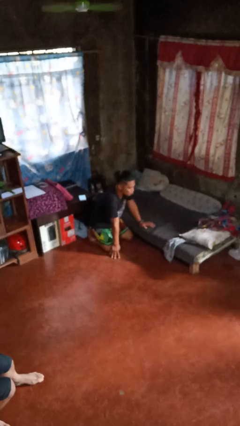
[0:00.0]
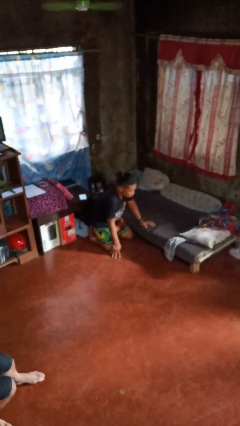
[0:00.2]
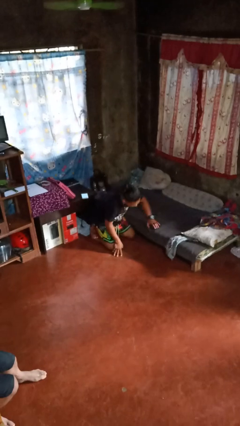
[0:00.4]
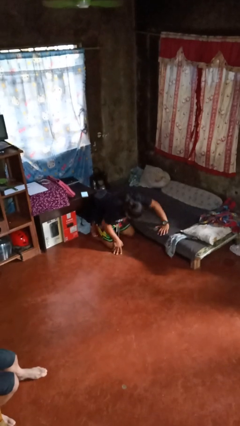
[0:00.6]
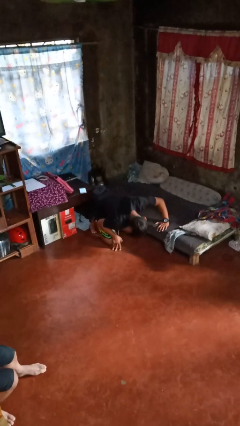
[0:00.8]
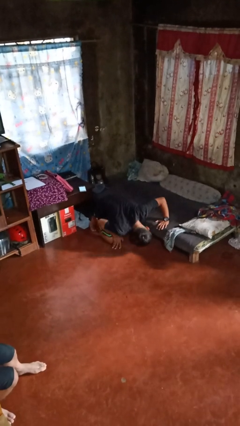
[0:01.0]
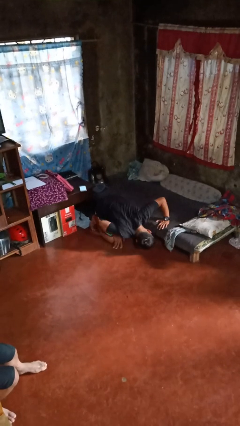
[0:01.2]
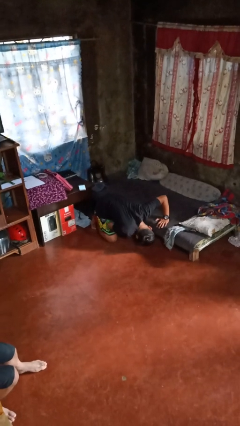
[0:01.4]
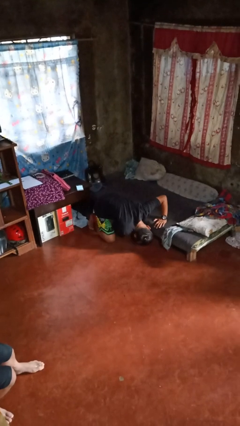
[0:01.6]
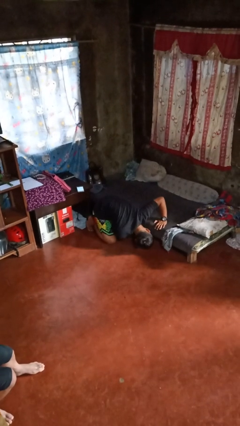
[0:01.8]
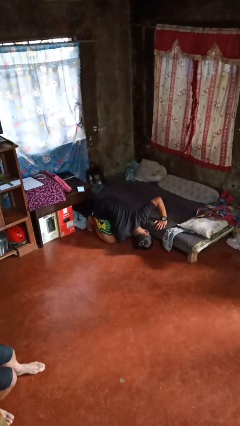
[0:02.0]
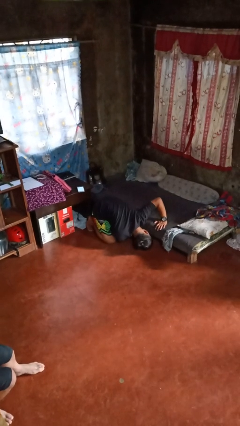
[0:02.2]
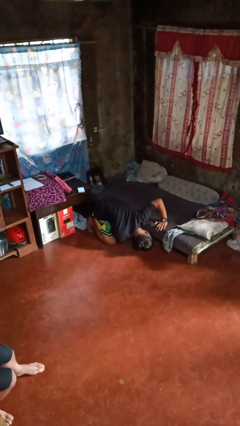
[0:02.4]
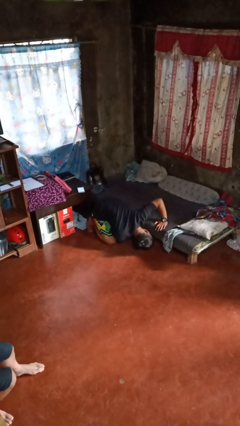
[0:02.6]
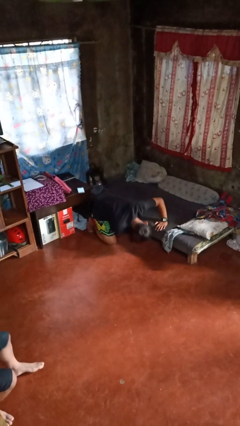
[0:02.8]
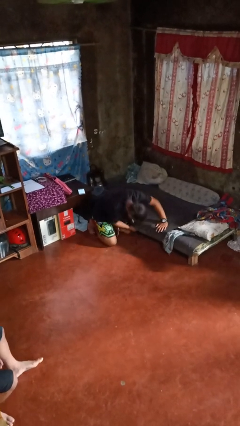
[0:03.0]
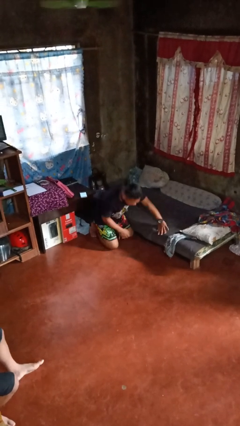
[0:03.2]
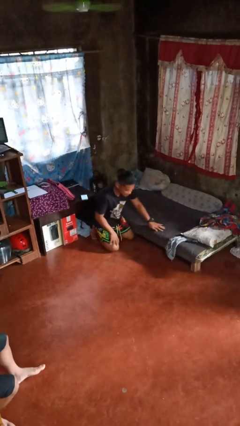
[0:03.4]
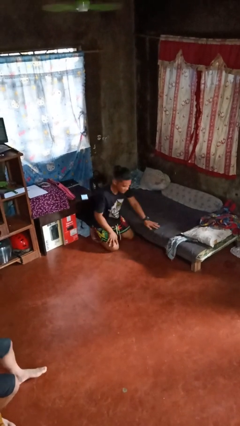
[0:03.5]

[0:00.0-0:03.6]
person searches under bed

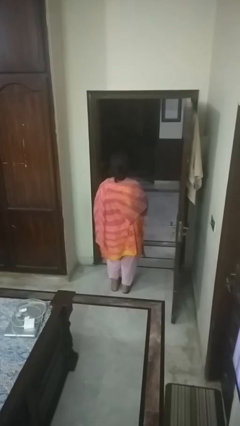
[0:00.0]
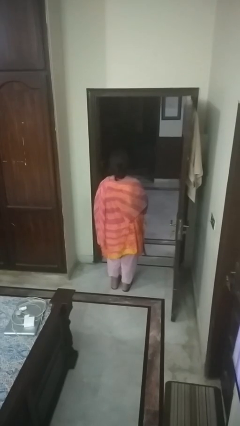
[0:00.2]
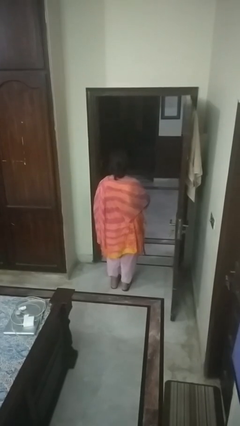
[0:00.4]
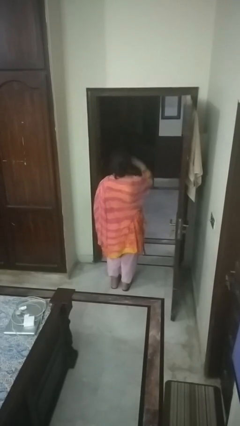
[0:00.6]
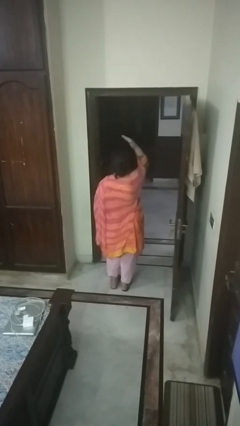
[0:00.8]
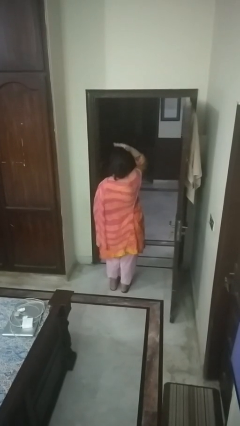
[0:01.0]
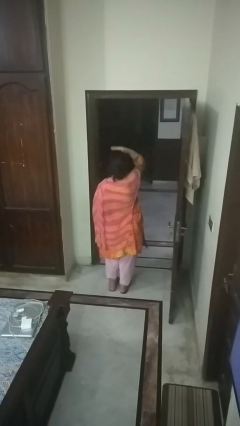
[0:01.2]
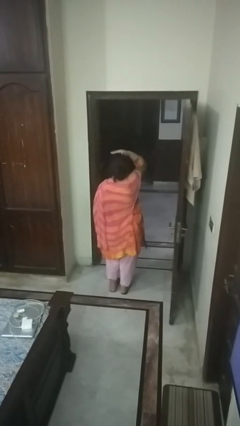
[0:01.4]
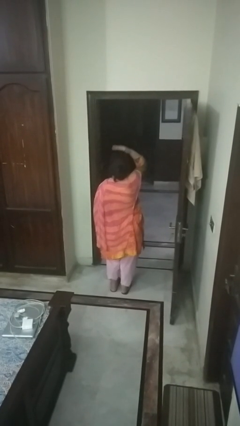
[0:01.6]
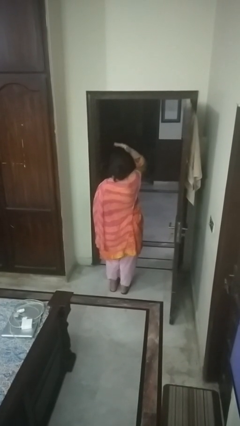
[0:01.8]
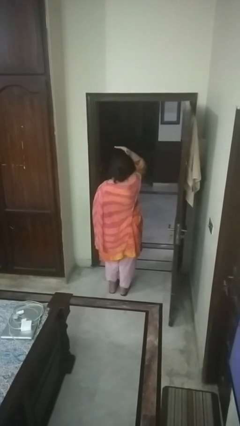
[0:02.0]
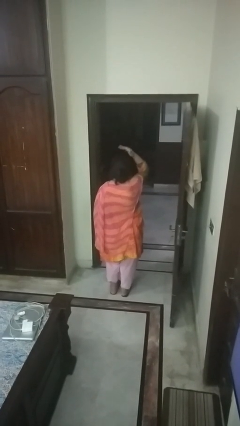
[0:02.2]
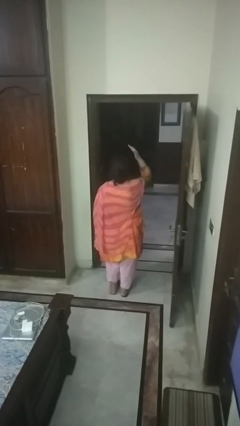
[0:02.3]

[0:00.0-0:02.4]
person pats head

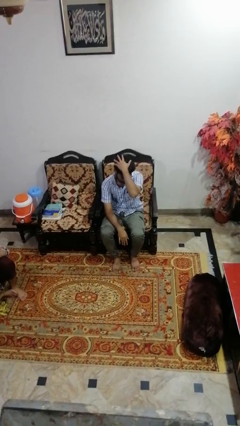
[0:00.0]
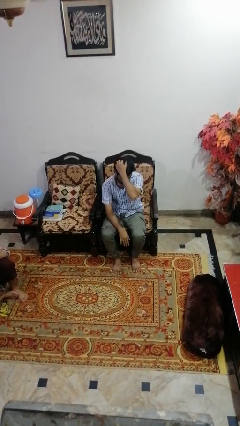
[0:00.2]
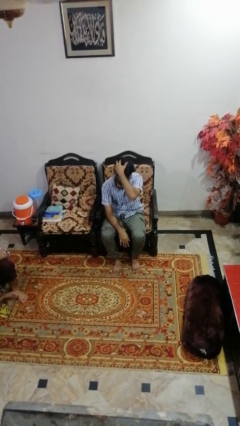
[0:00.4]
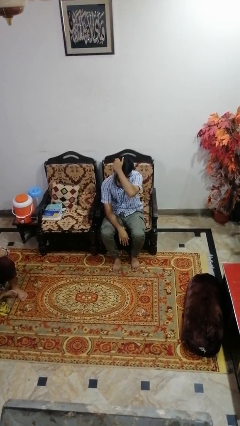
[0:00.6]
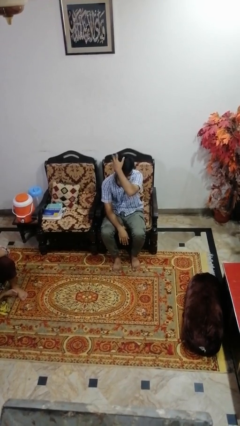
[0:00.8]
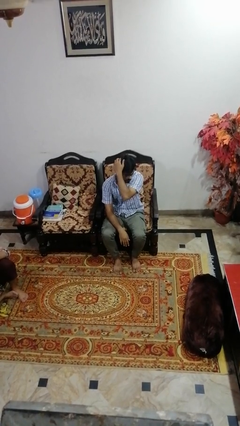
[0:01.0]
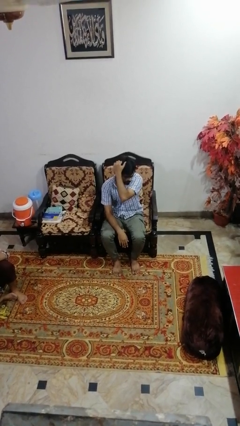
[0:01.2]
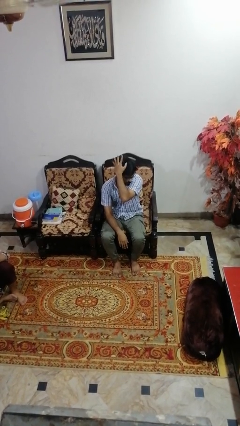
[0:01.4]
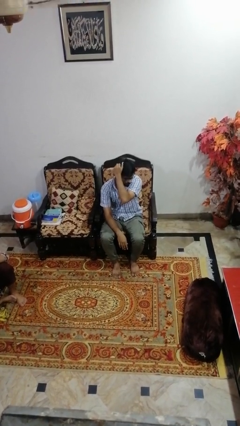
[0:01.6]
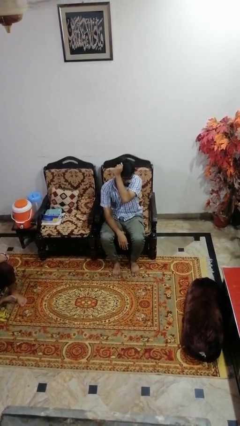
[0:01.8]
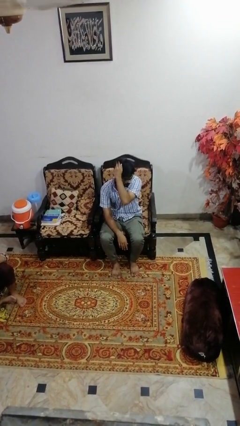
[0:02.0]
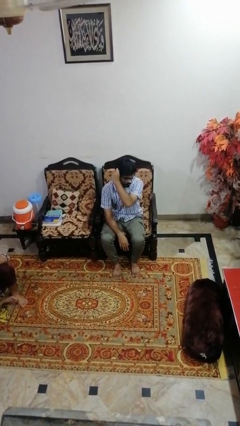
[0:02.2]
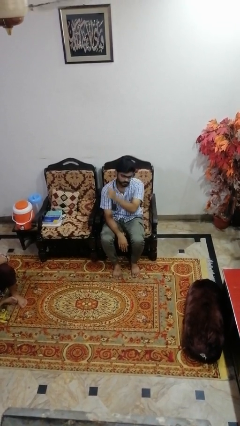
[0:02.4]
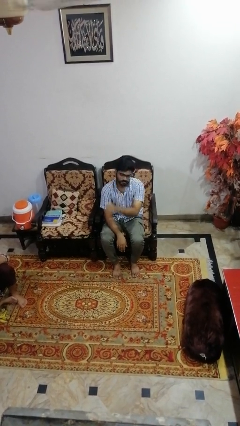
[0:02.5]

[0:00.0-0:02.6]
person scratches face

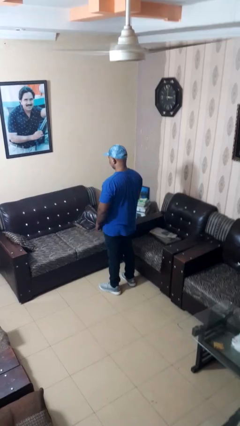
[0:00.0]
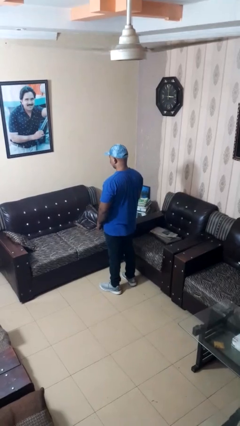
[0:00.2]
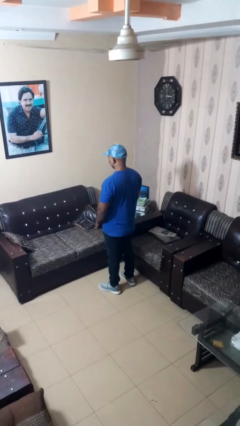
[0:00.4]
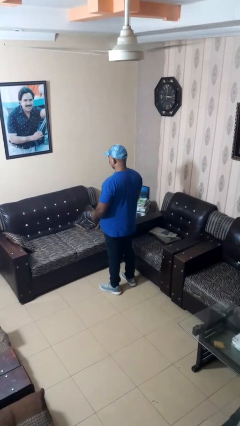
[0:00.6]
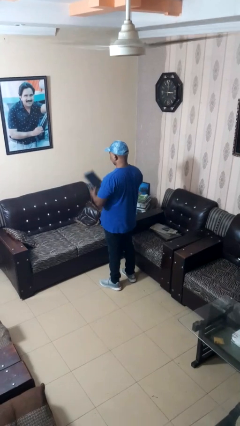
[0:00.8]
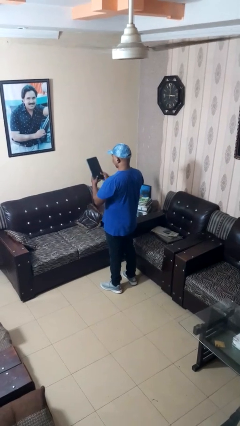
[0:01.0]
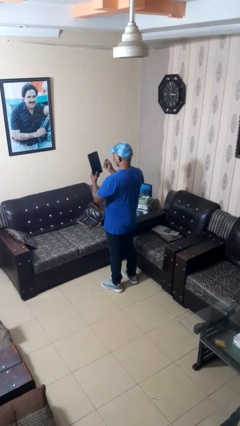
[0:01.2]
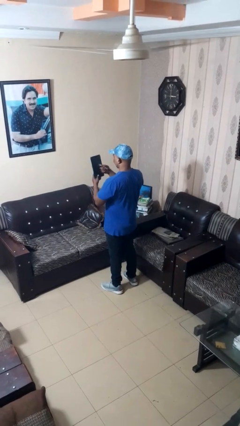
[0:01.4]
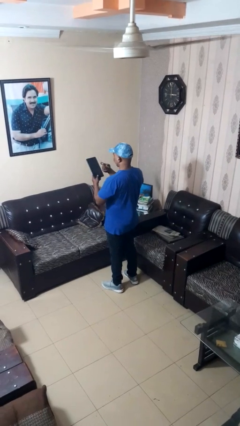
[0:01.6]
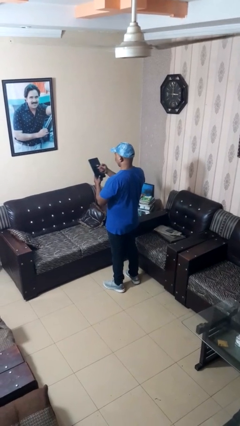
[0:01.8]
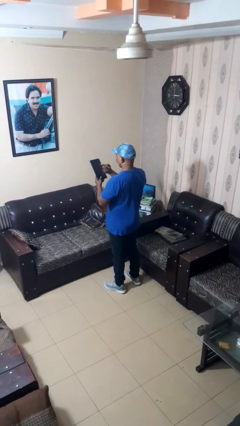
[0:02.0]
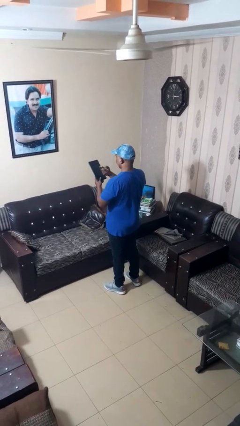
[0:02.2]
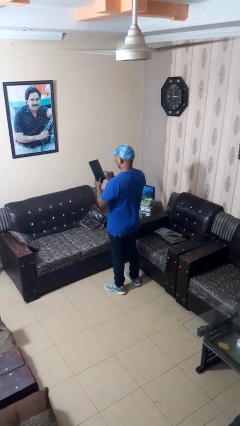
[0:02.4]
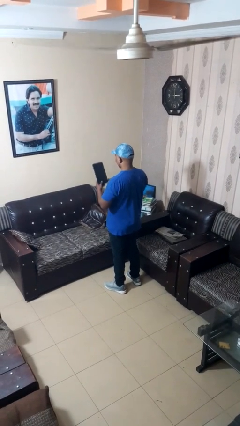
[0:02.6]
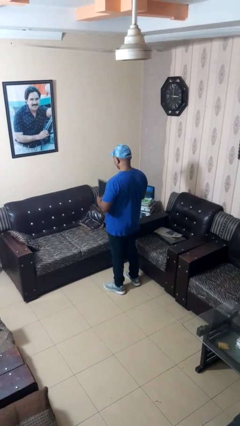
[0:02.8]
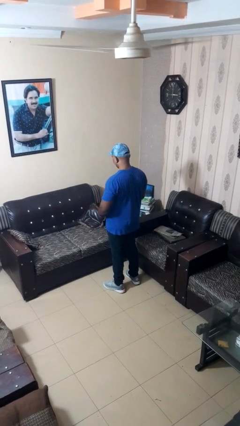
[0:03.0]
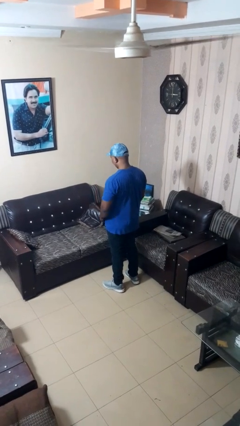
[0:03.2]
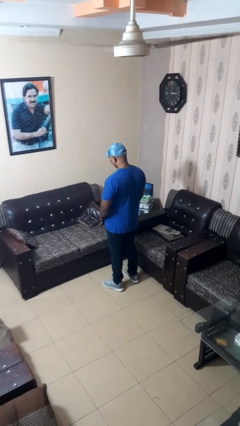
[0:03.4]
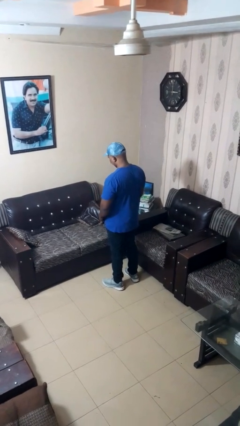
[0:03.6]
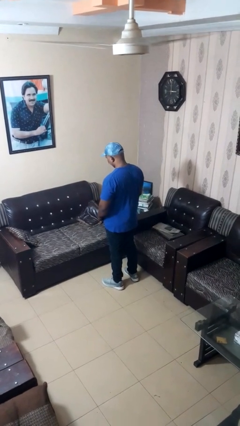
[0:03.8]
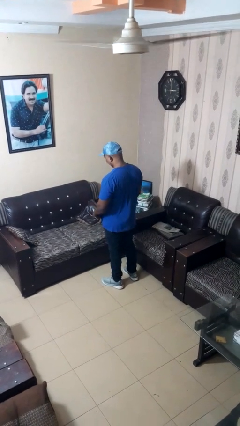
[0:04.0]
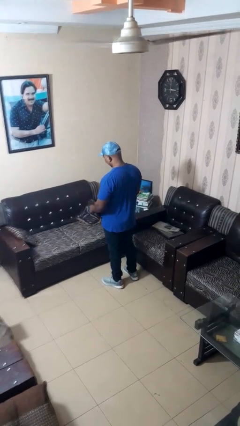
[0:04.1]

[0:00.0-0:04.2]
person taps object with finger

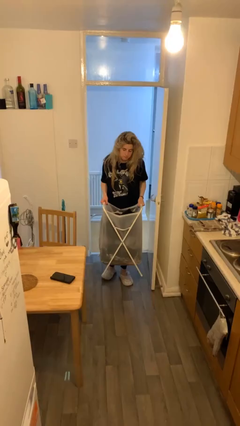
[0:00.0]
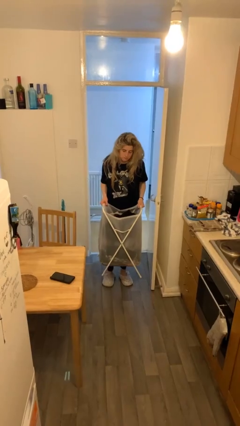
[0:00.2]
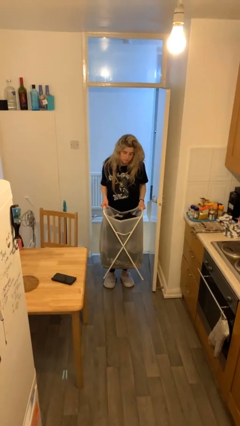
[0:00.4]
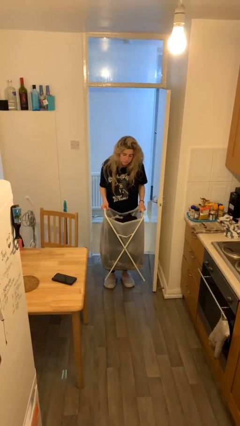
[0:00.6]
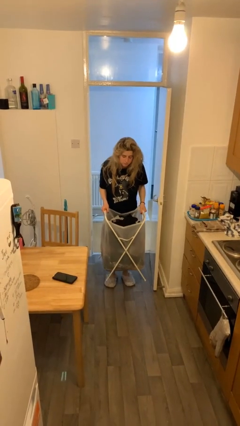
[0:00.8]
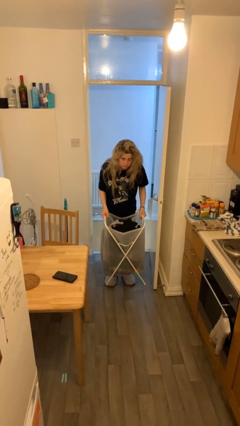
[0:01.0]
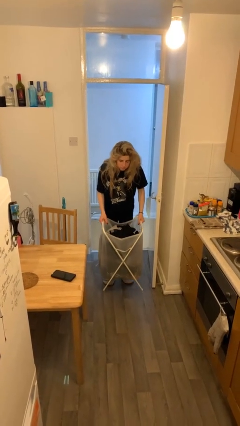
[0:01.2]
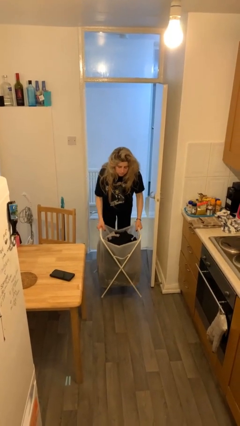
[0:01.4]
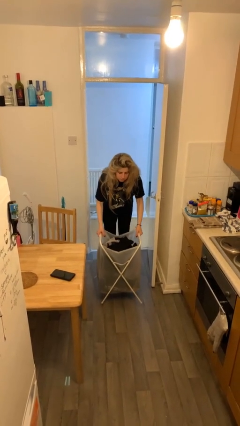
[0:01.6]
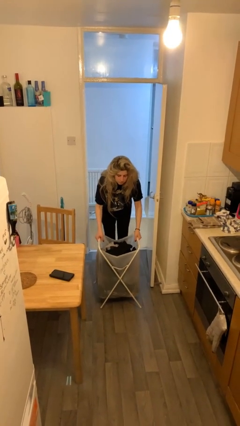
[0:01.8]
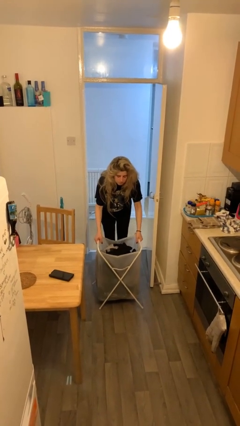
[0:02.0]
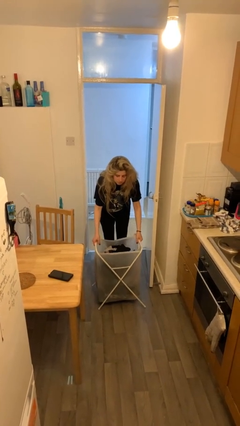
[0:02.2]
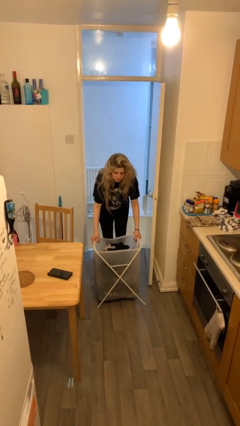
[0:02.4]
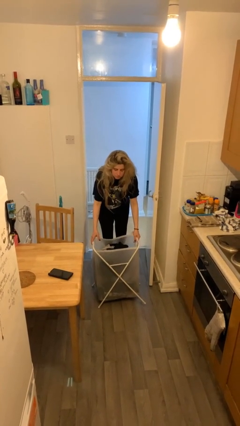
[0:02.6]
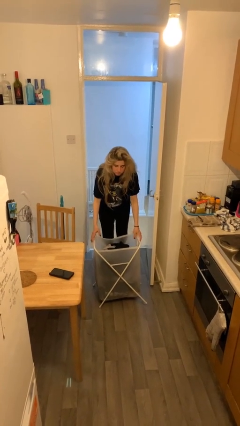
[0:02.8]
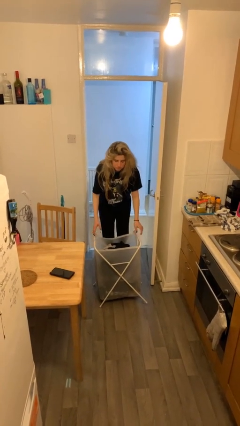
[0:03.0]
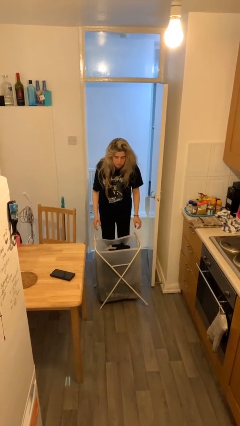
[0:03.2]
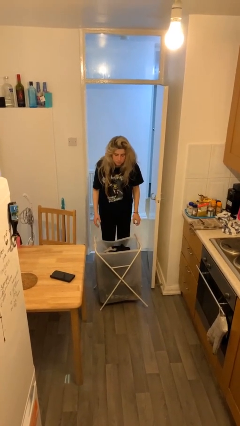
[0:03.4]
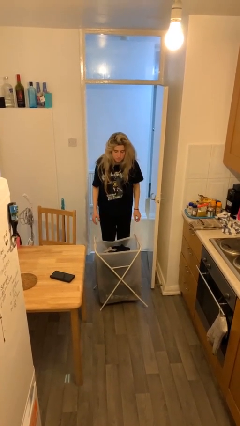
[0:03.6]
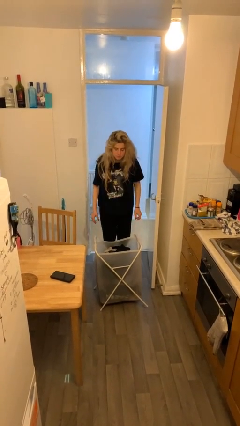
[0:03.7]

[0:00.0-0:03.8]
person puts down object on floor

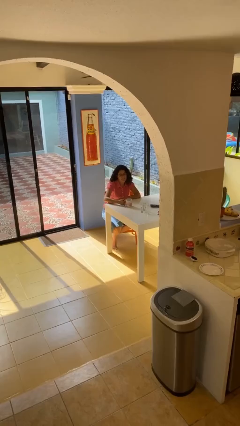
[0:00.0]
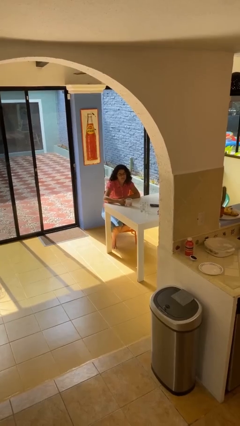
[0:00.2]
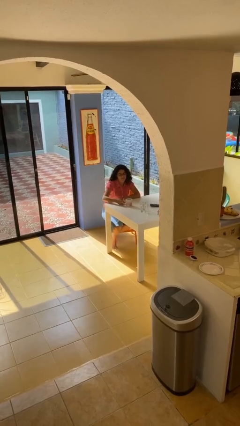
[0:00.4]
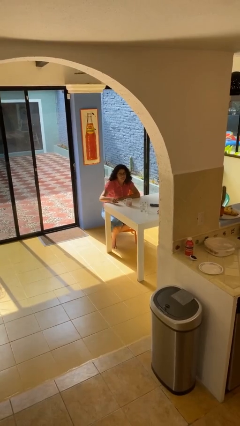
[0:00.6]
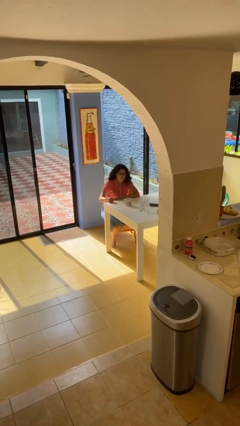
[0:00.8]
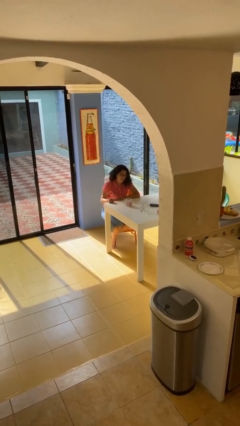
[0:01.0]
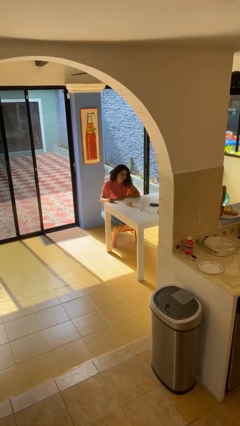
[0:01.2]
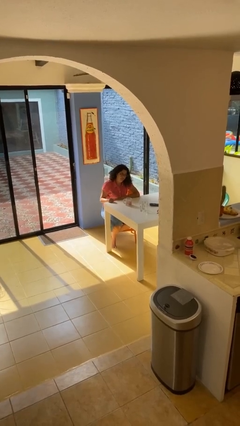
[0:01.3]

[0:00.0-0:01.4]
person puts down object on table
